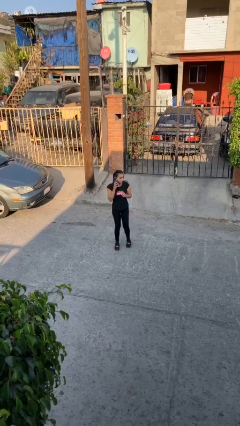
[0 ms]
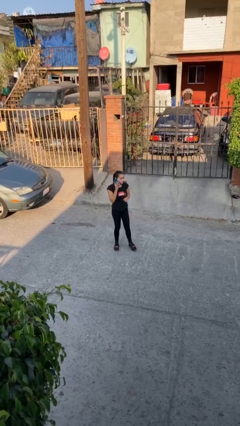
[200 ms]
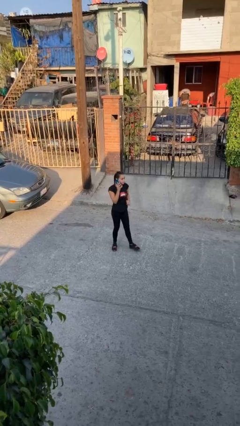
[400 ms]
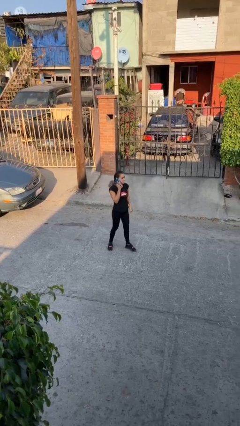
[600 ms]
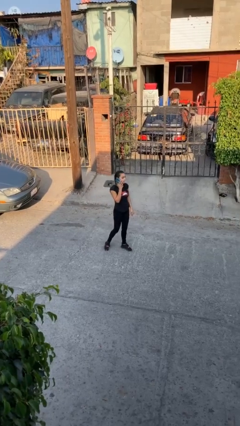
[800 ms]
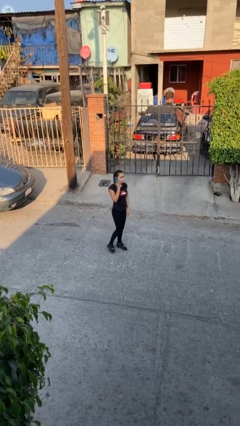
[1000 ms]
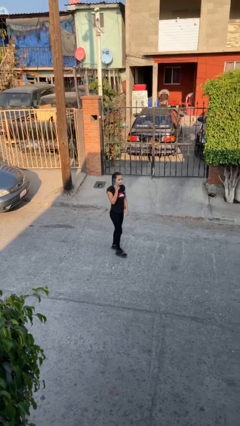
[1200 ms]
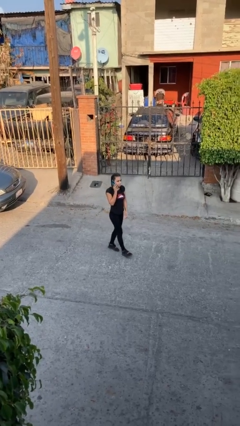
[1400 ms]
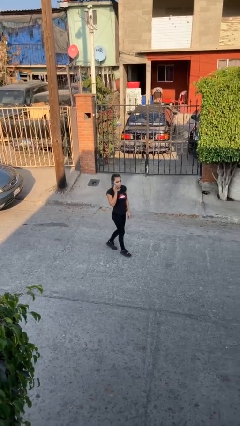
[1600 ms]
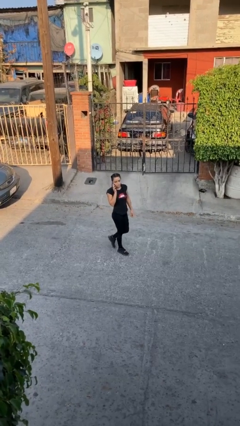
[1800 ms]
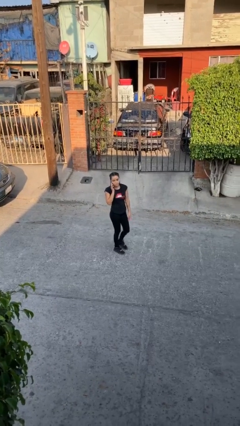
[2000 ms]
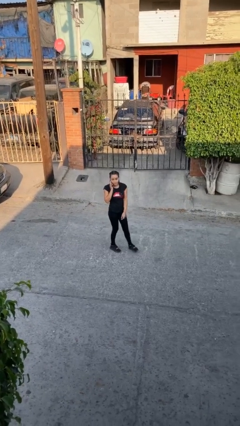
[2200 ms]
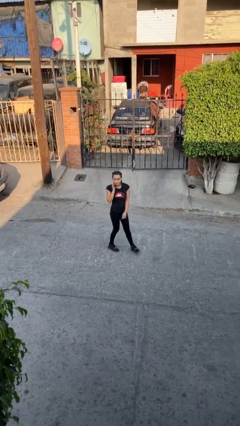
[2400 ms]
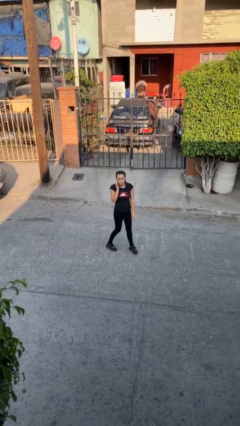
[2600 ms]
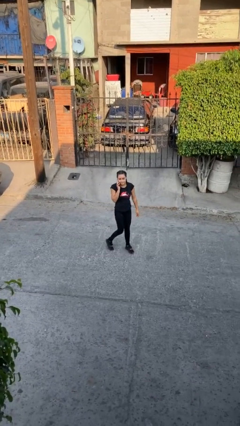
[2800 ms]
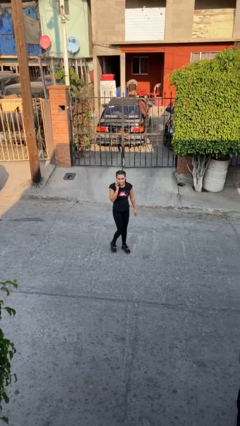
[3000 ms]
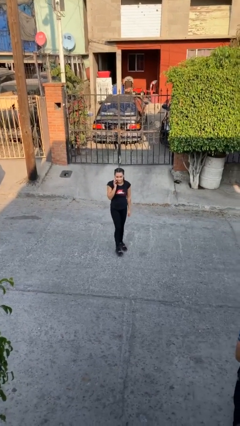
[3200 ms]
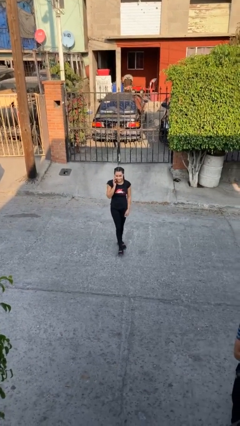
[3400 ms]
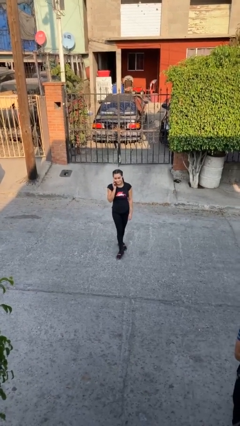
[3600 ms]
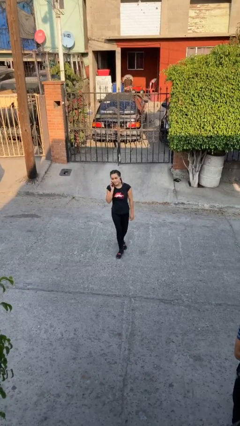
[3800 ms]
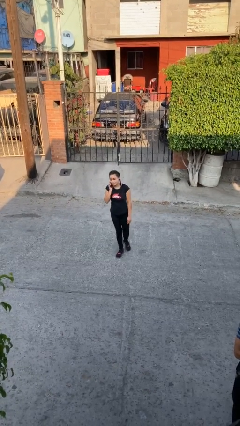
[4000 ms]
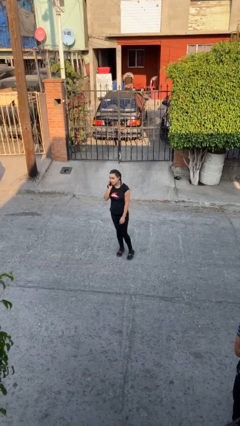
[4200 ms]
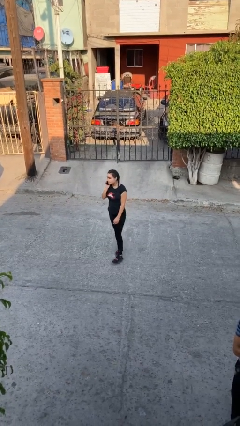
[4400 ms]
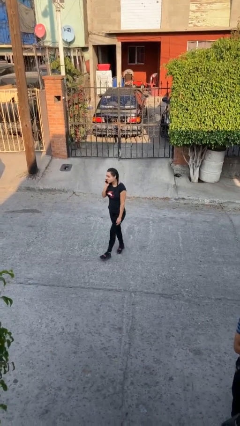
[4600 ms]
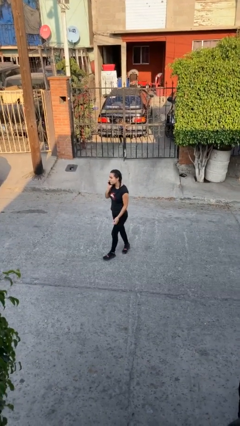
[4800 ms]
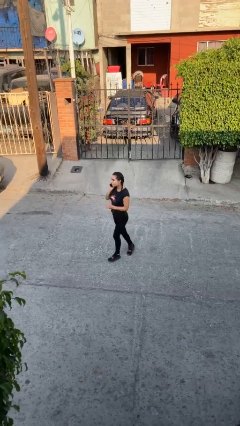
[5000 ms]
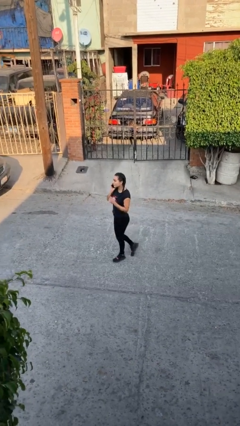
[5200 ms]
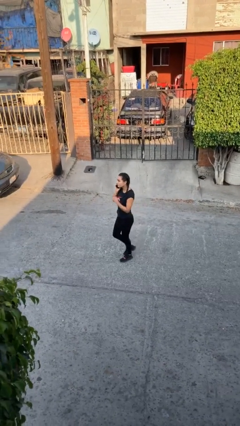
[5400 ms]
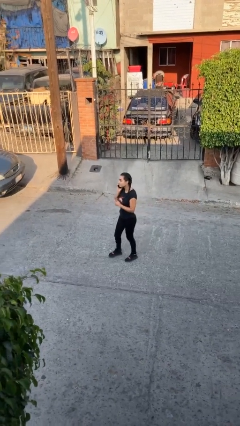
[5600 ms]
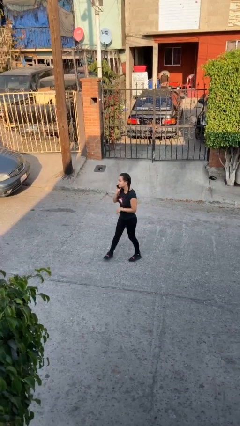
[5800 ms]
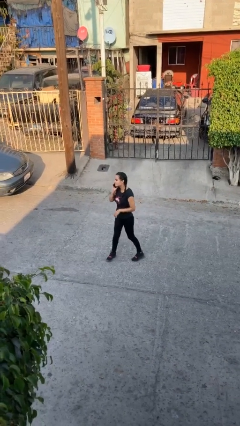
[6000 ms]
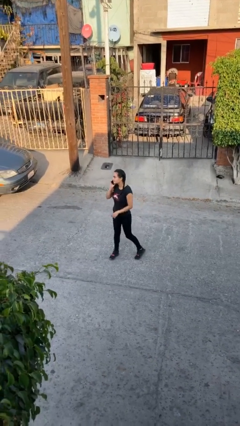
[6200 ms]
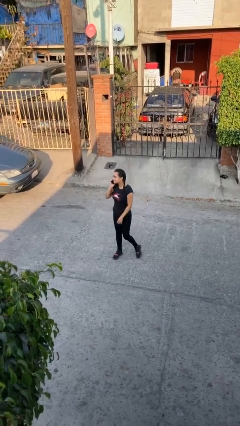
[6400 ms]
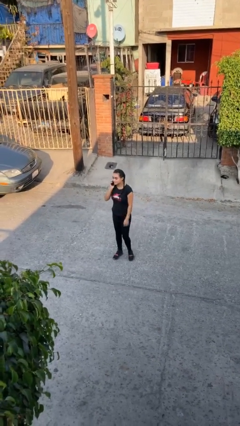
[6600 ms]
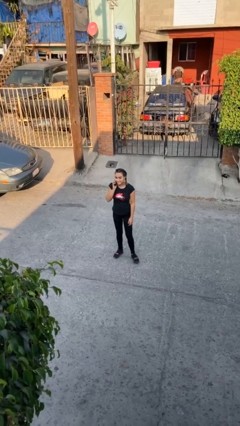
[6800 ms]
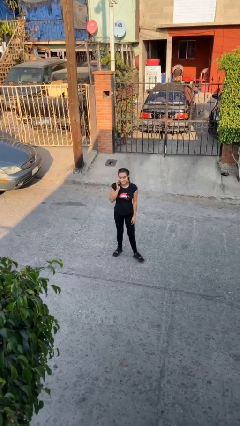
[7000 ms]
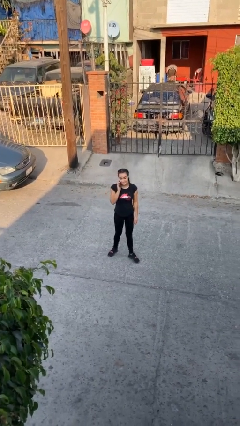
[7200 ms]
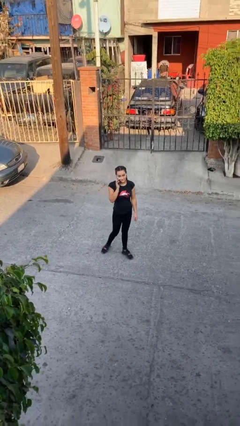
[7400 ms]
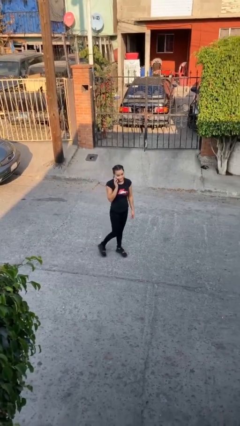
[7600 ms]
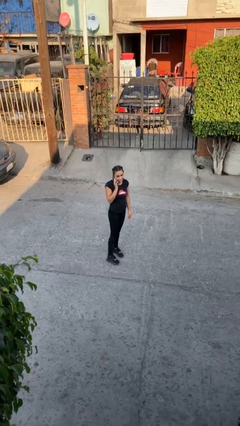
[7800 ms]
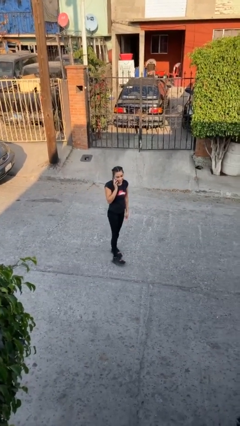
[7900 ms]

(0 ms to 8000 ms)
person talks on phone

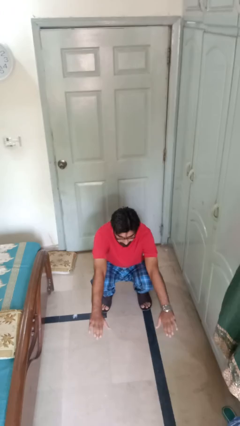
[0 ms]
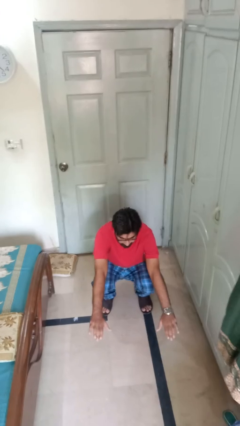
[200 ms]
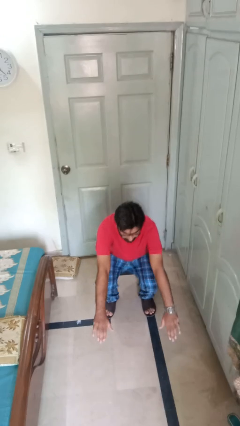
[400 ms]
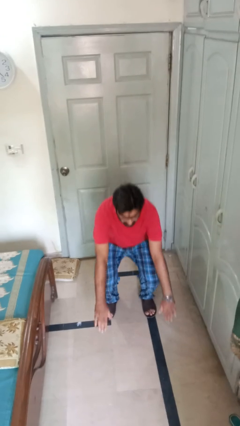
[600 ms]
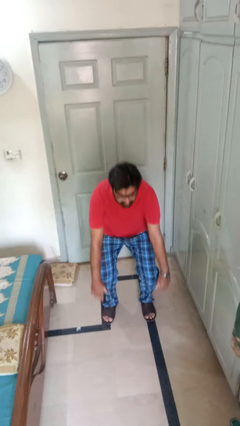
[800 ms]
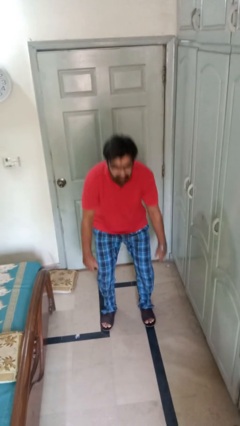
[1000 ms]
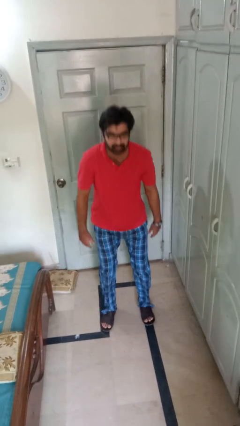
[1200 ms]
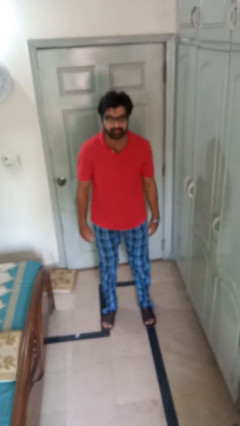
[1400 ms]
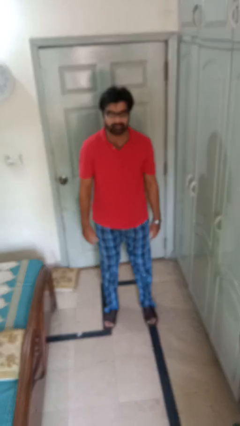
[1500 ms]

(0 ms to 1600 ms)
person stands up

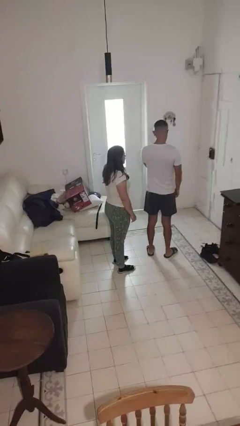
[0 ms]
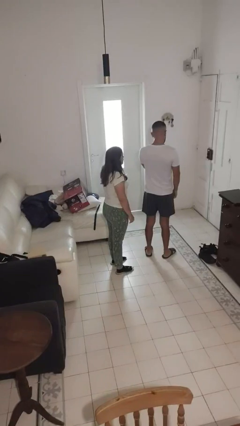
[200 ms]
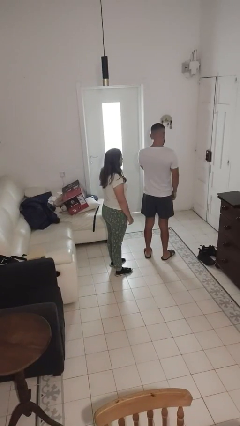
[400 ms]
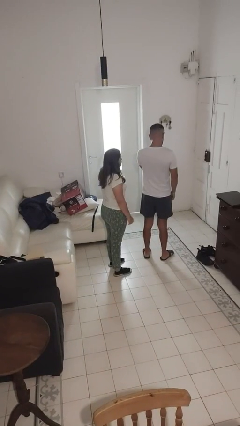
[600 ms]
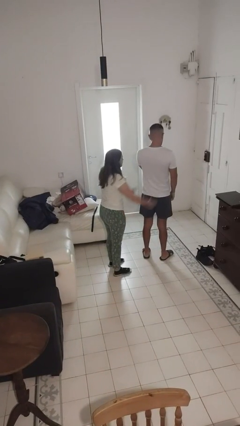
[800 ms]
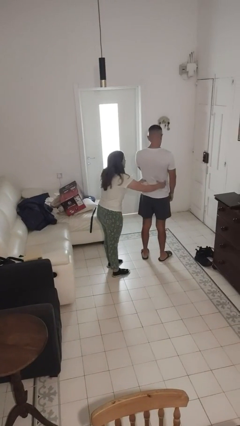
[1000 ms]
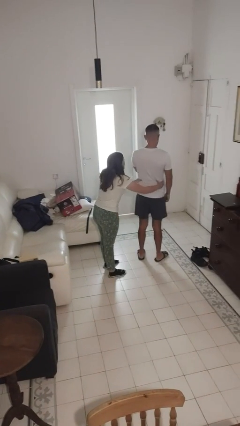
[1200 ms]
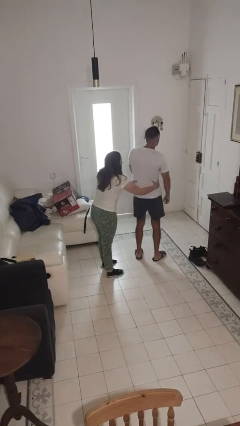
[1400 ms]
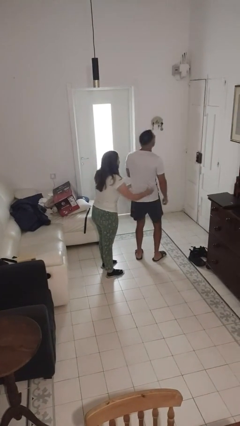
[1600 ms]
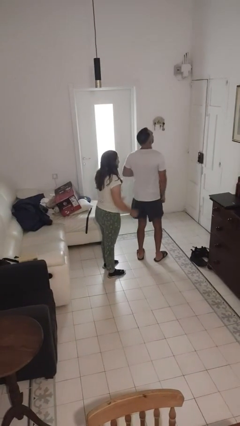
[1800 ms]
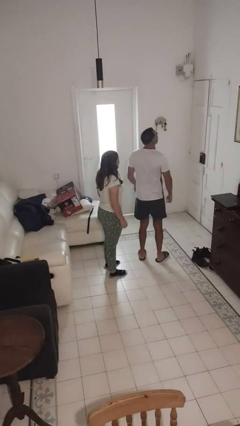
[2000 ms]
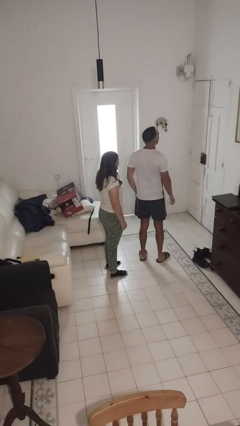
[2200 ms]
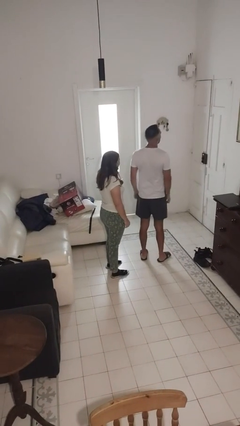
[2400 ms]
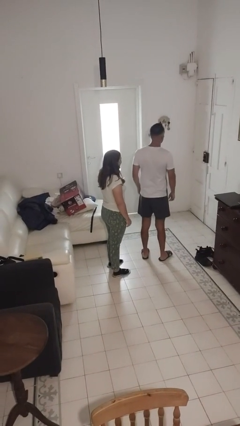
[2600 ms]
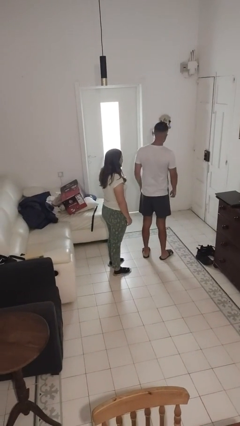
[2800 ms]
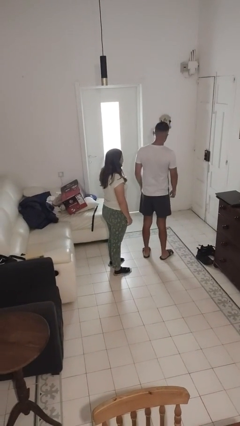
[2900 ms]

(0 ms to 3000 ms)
person tickles person

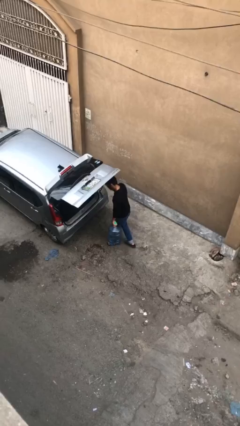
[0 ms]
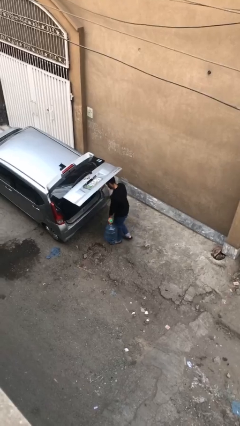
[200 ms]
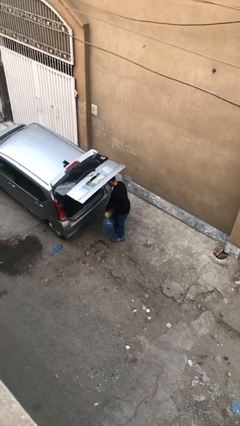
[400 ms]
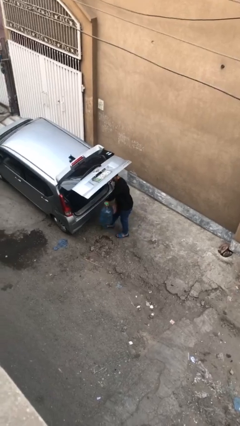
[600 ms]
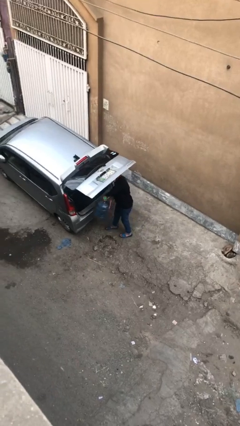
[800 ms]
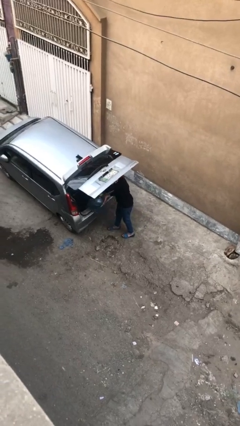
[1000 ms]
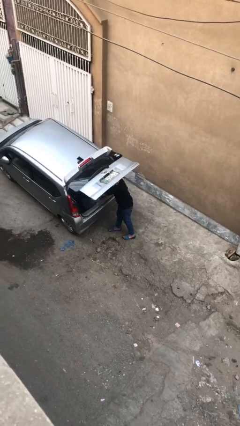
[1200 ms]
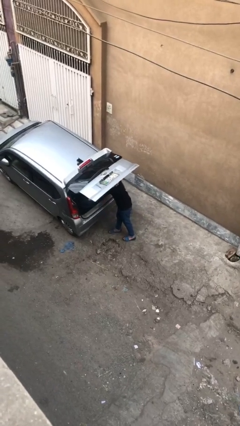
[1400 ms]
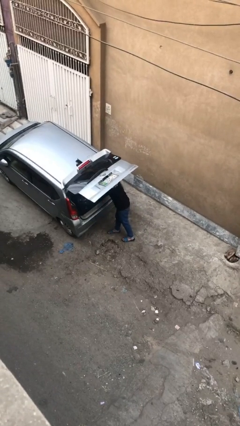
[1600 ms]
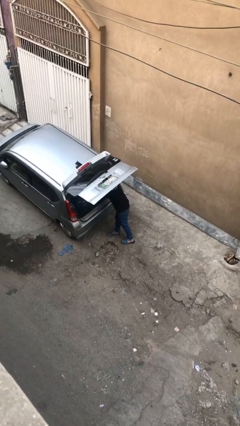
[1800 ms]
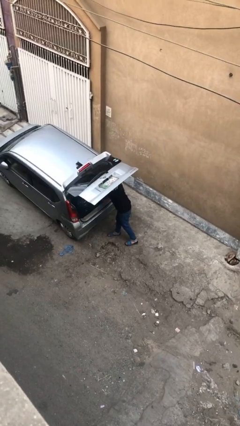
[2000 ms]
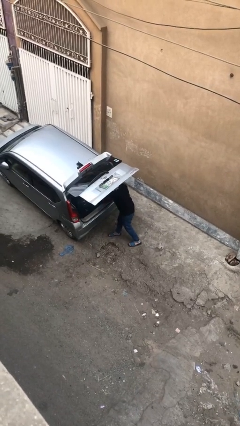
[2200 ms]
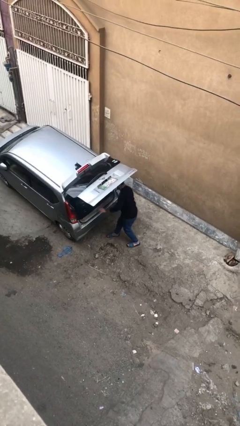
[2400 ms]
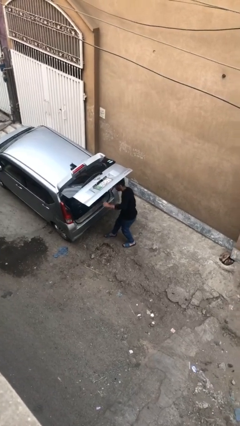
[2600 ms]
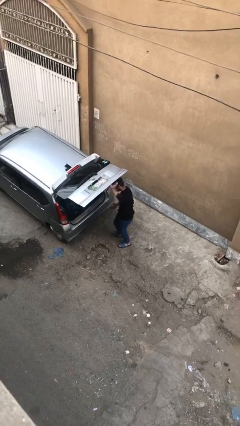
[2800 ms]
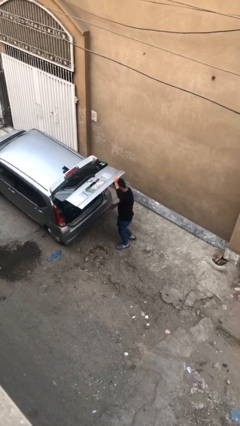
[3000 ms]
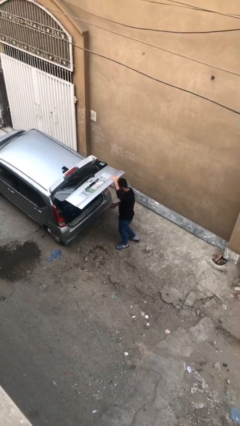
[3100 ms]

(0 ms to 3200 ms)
person loads car

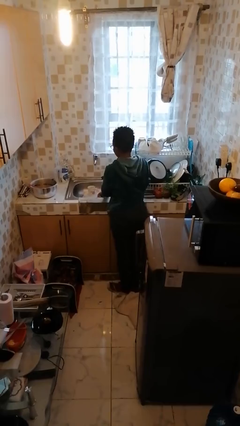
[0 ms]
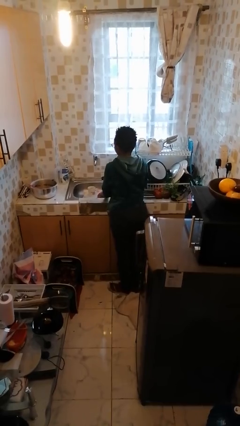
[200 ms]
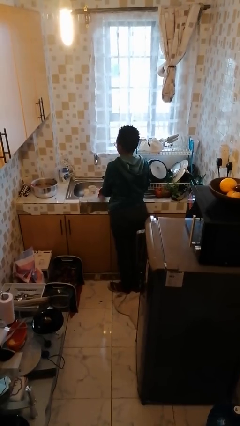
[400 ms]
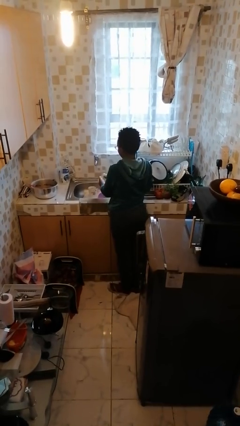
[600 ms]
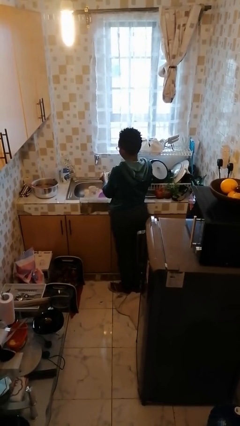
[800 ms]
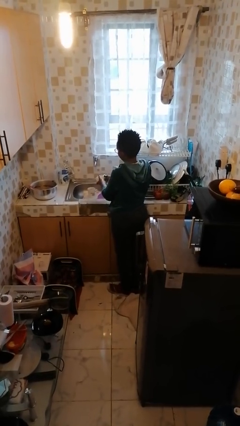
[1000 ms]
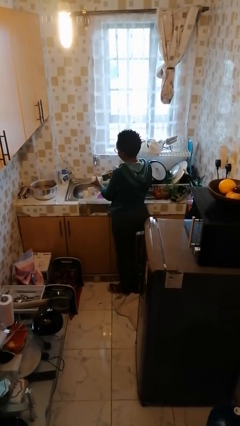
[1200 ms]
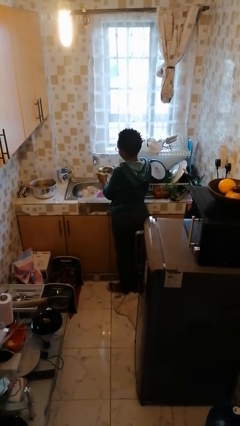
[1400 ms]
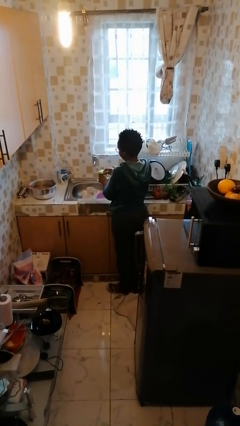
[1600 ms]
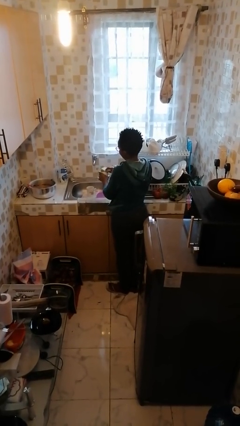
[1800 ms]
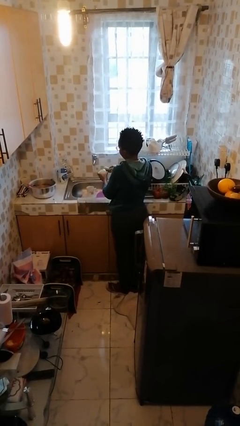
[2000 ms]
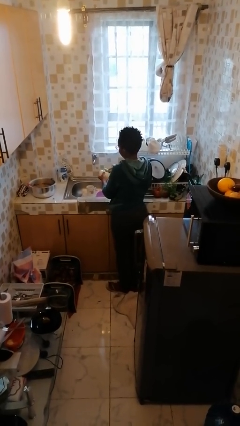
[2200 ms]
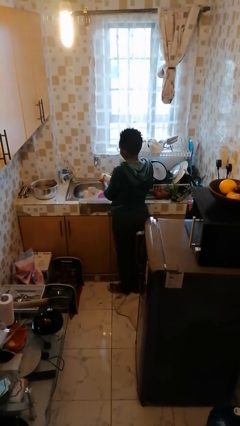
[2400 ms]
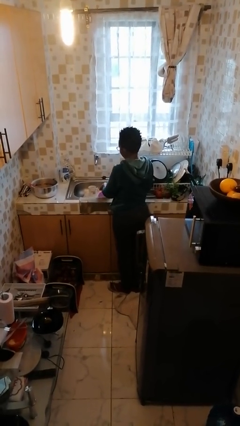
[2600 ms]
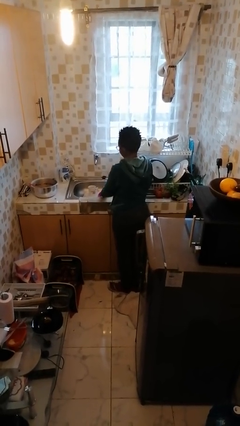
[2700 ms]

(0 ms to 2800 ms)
person washes dish
